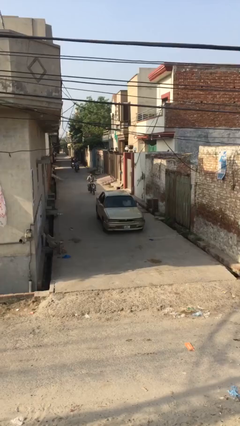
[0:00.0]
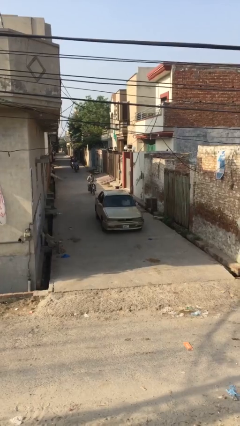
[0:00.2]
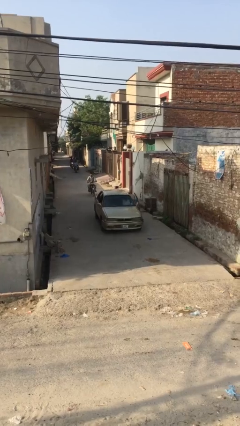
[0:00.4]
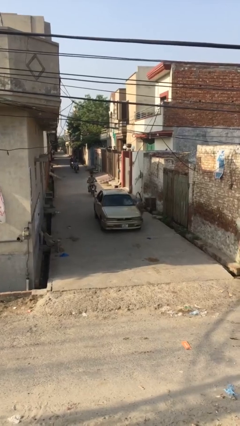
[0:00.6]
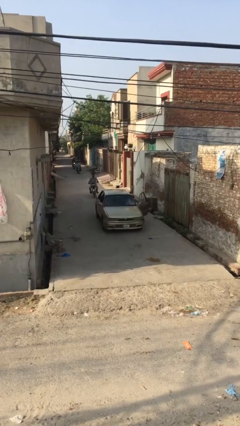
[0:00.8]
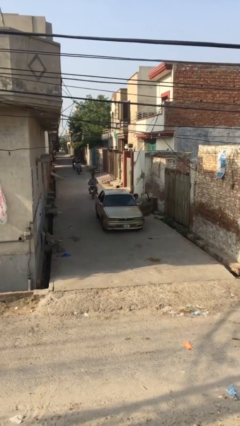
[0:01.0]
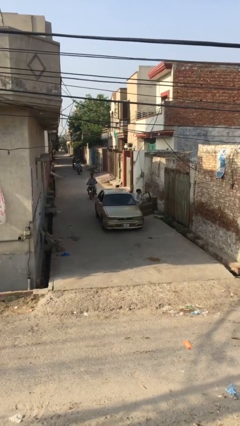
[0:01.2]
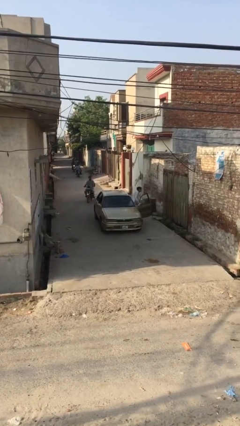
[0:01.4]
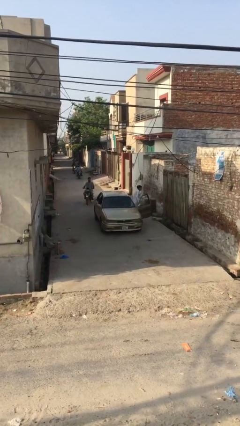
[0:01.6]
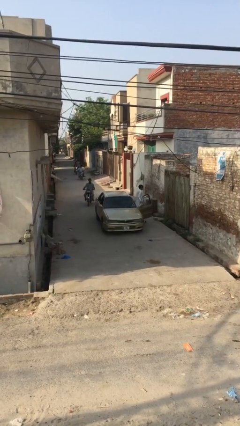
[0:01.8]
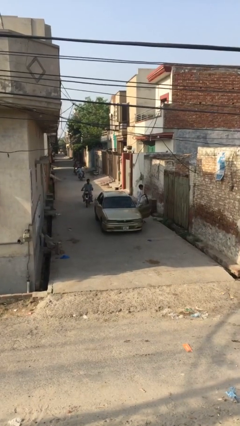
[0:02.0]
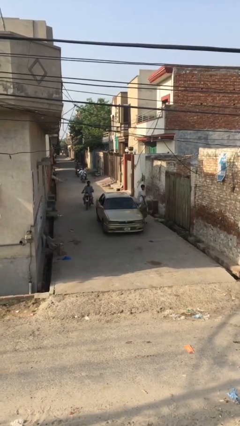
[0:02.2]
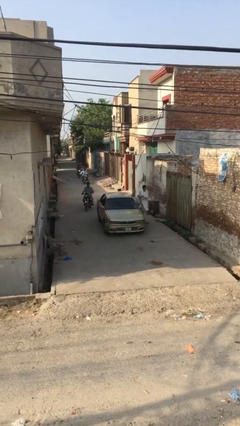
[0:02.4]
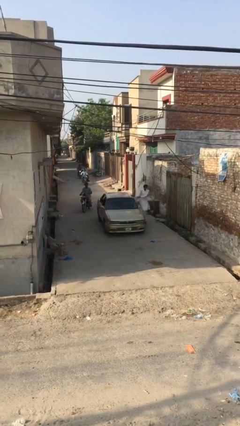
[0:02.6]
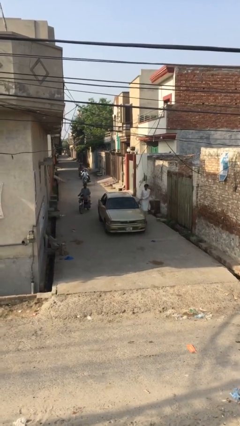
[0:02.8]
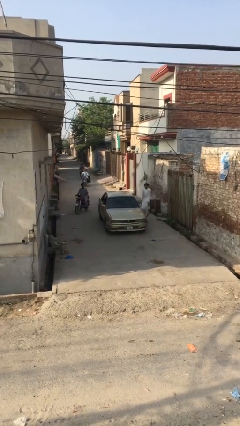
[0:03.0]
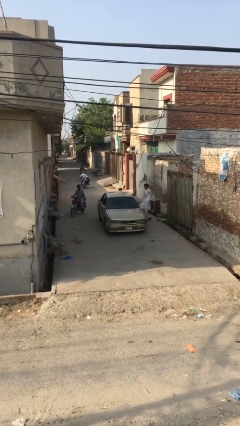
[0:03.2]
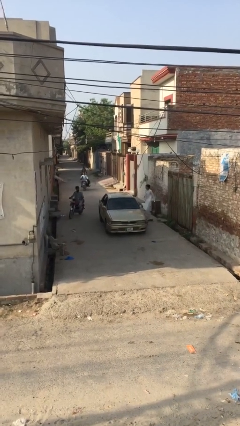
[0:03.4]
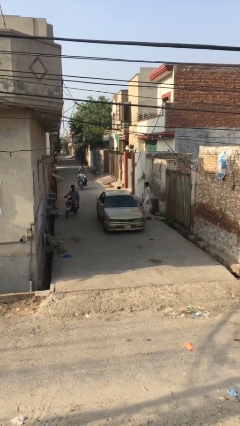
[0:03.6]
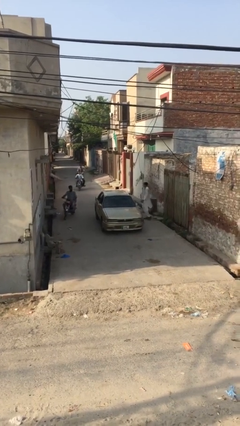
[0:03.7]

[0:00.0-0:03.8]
car drops off person

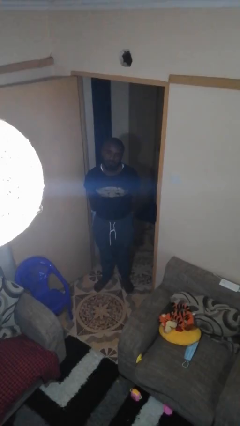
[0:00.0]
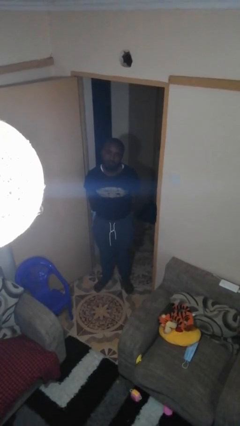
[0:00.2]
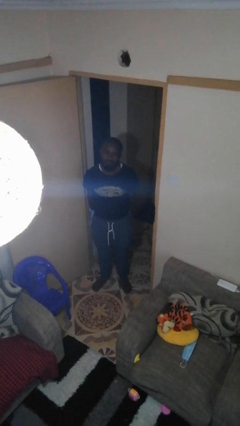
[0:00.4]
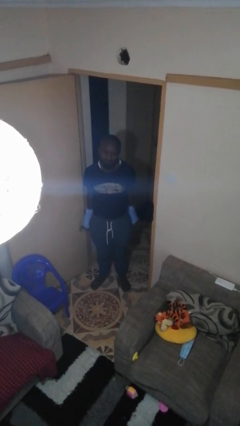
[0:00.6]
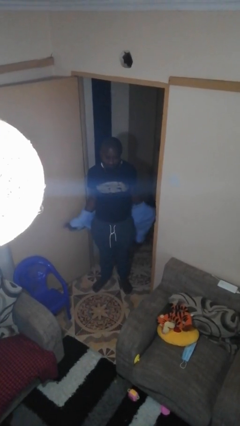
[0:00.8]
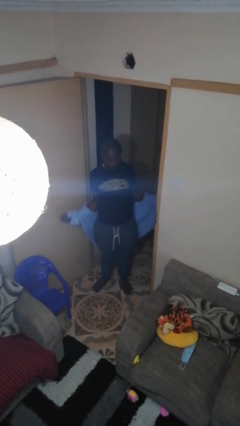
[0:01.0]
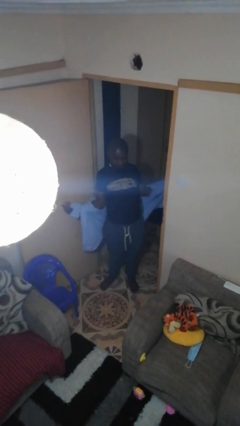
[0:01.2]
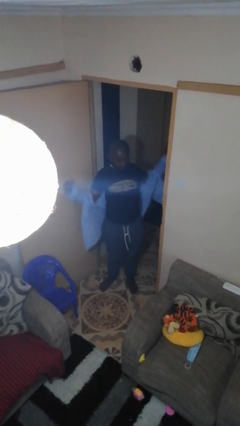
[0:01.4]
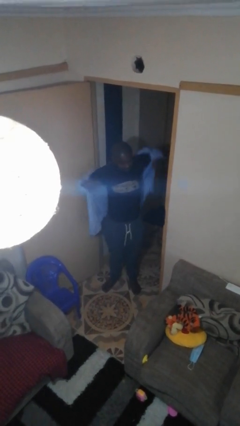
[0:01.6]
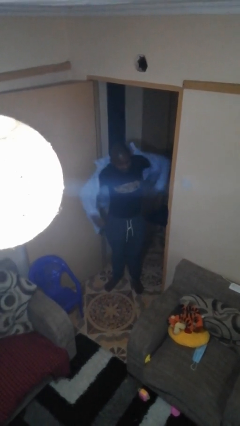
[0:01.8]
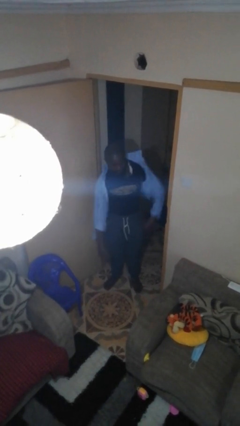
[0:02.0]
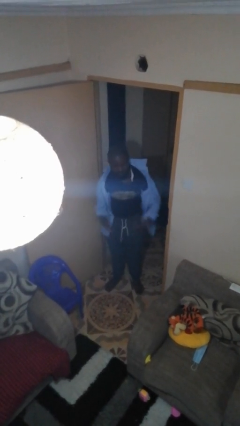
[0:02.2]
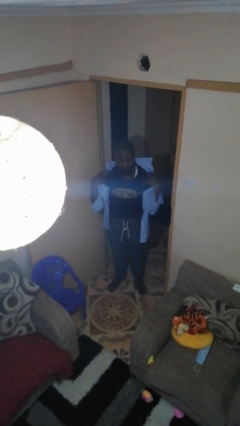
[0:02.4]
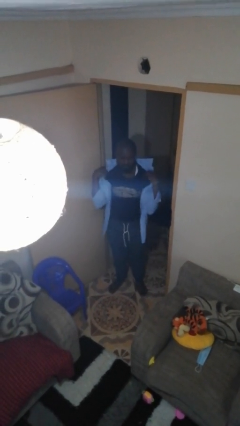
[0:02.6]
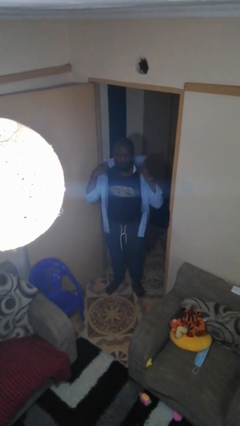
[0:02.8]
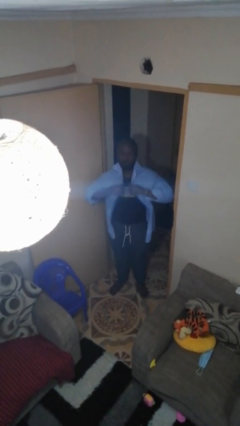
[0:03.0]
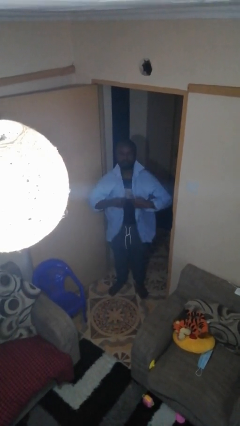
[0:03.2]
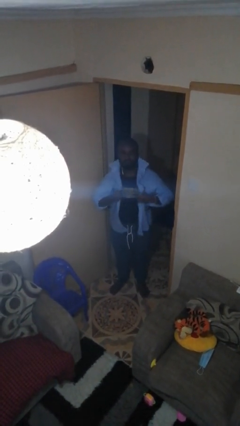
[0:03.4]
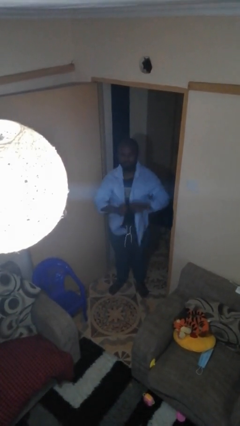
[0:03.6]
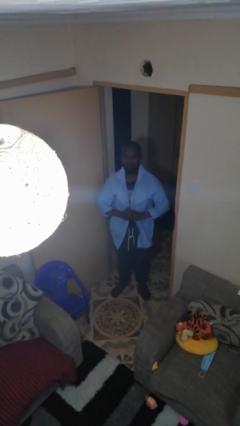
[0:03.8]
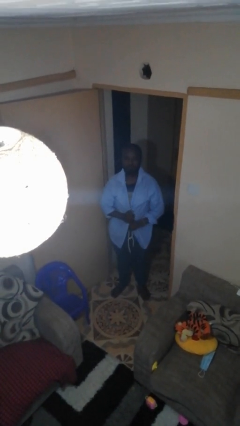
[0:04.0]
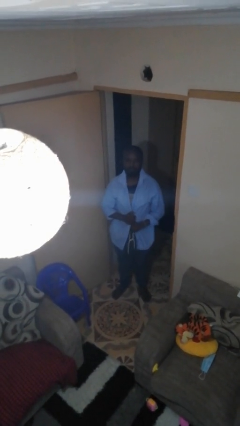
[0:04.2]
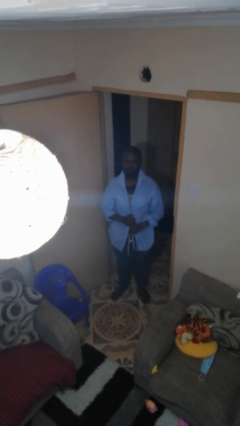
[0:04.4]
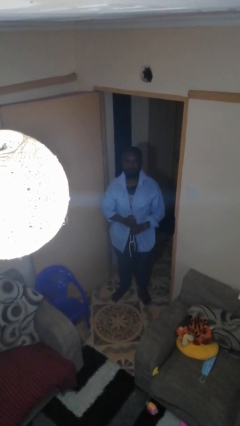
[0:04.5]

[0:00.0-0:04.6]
person puts on shirt

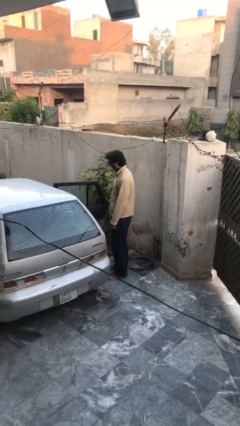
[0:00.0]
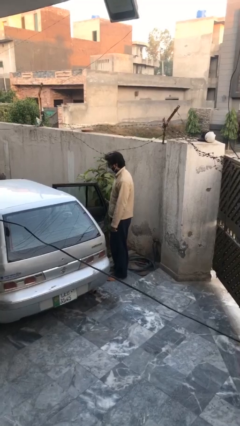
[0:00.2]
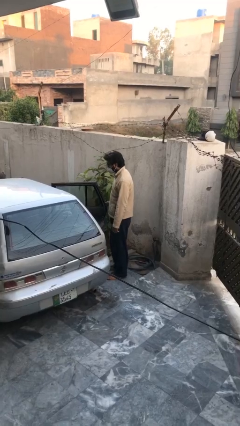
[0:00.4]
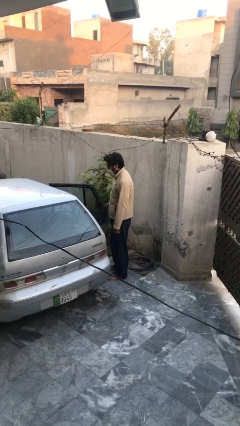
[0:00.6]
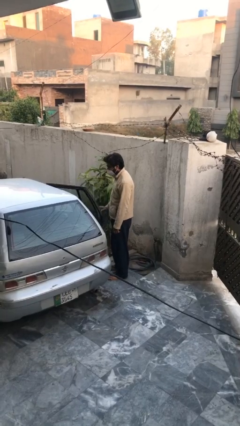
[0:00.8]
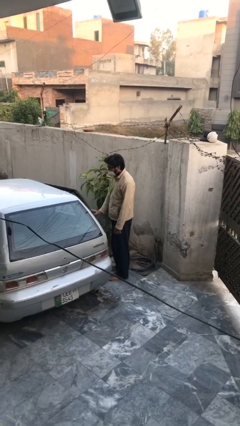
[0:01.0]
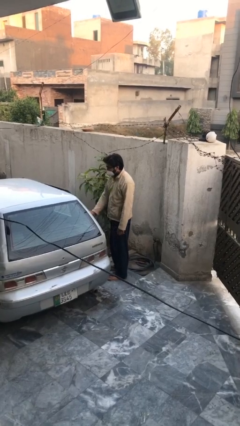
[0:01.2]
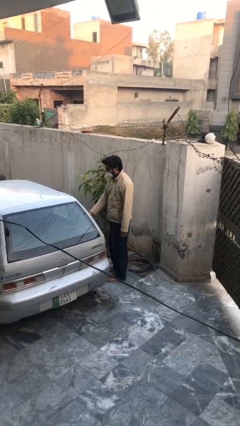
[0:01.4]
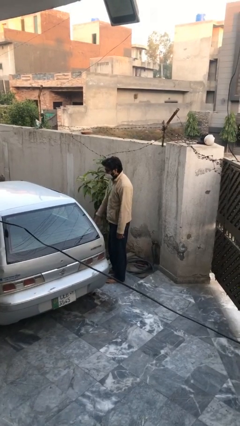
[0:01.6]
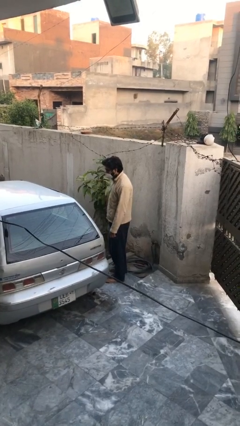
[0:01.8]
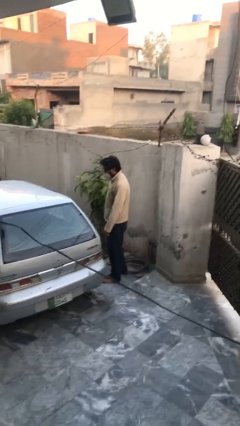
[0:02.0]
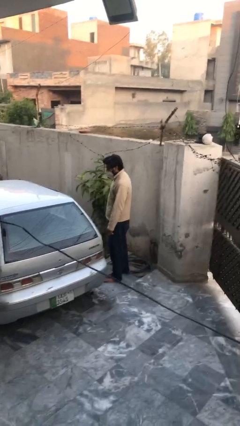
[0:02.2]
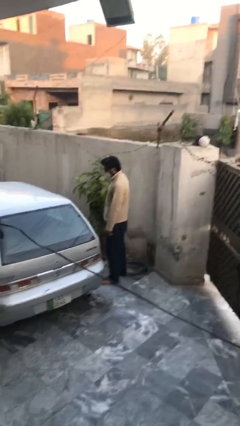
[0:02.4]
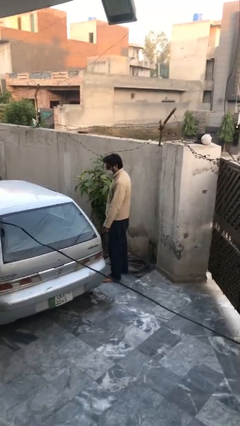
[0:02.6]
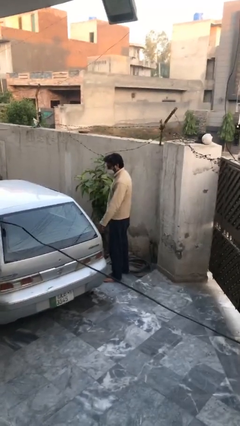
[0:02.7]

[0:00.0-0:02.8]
person closes car door

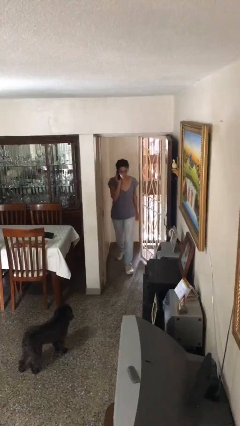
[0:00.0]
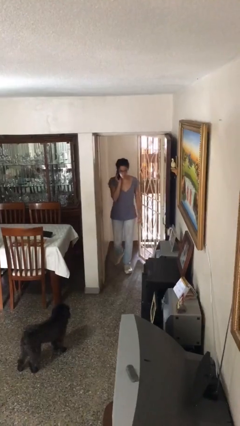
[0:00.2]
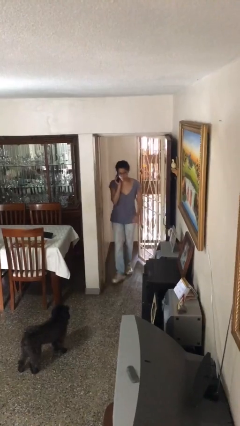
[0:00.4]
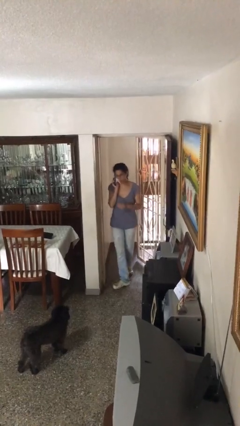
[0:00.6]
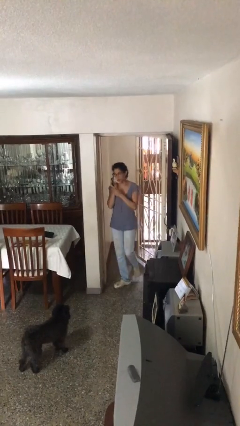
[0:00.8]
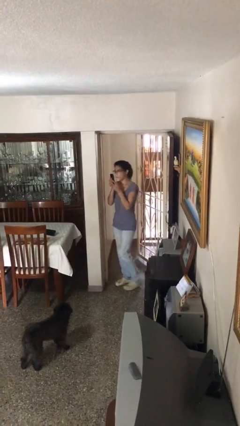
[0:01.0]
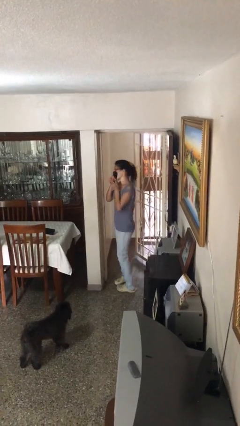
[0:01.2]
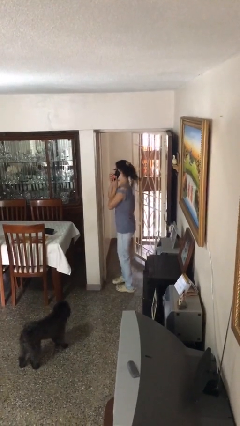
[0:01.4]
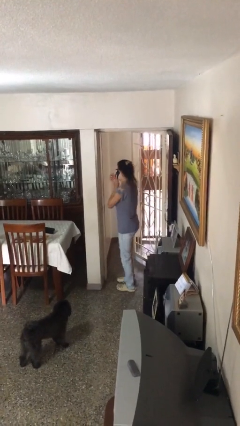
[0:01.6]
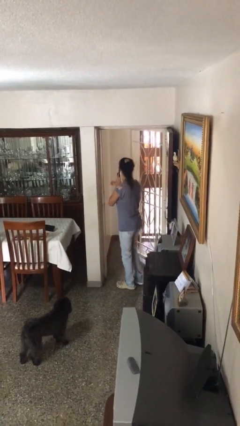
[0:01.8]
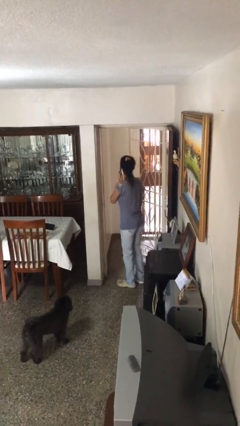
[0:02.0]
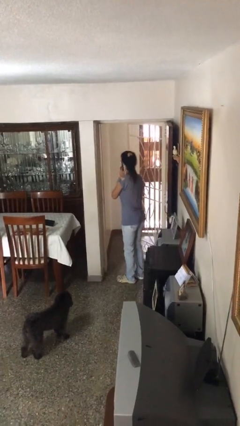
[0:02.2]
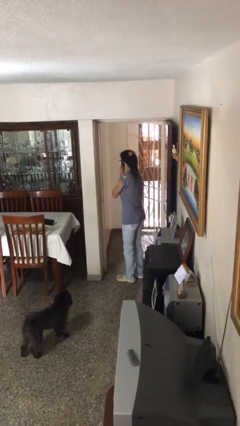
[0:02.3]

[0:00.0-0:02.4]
person enters scene through structure

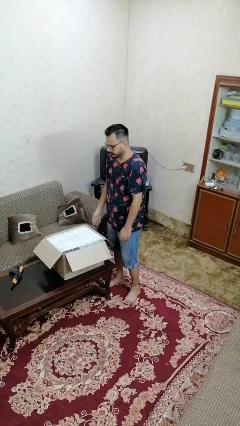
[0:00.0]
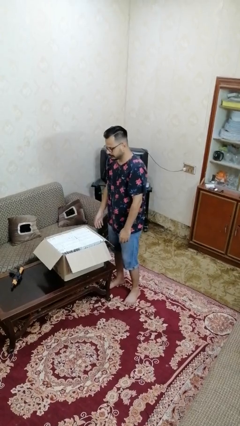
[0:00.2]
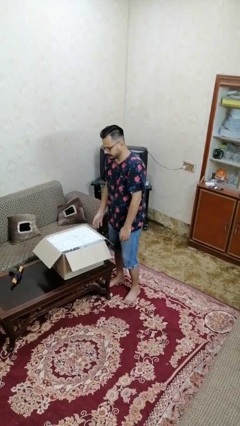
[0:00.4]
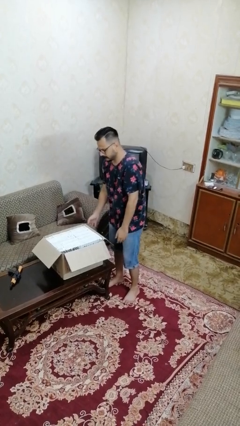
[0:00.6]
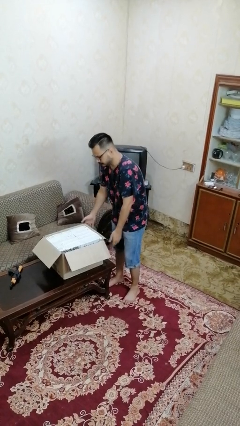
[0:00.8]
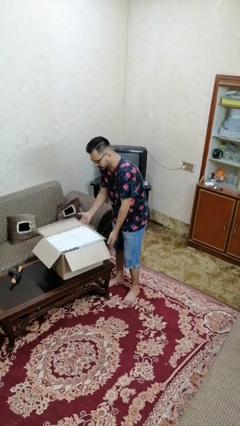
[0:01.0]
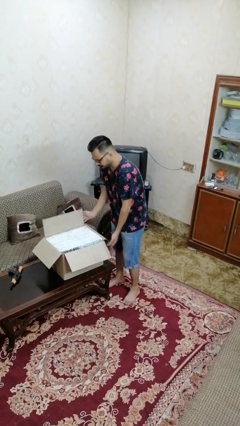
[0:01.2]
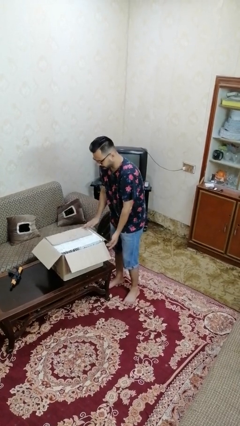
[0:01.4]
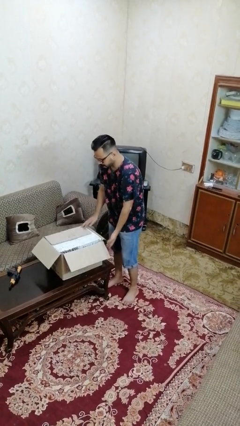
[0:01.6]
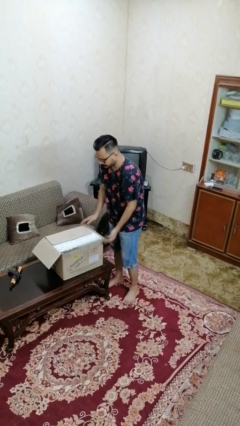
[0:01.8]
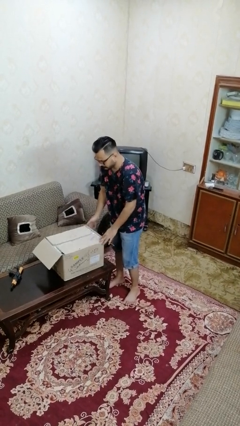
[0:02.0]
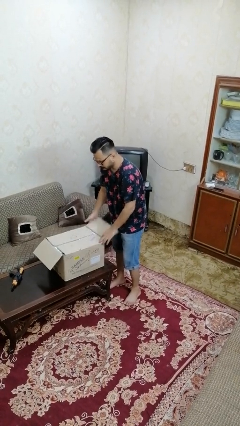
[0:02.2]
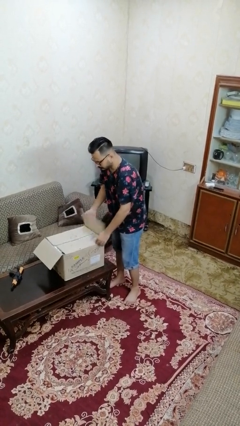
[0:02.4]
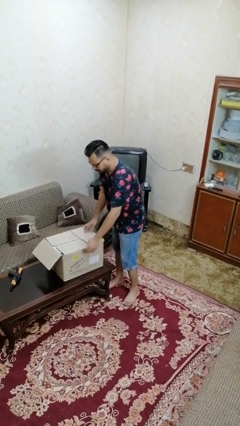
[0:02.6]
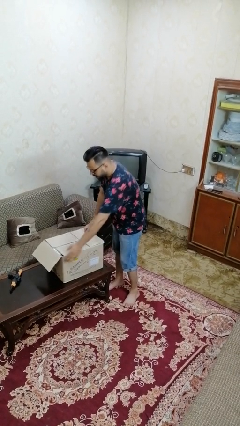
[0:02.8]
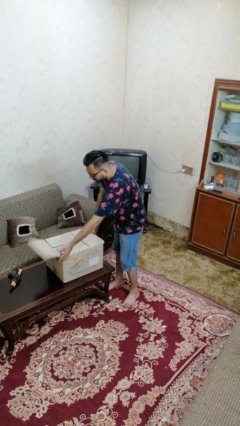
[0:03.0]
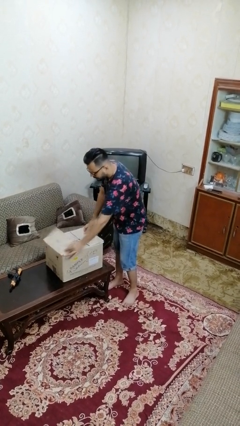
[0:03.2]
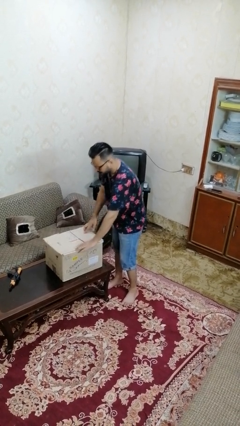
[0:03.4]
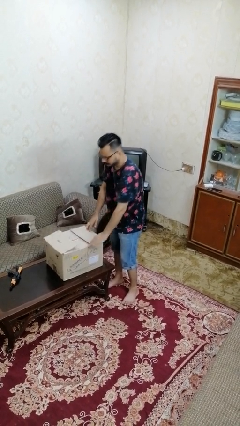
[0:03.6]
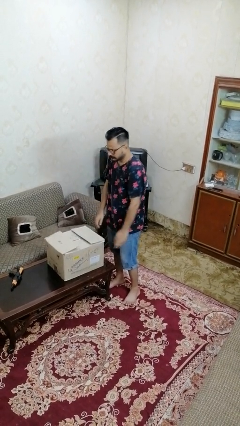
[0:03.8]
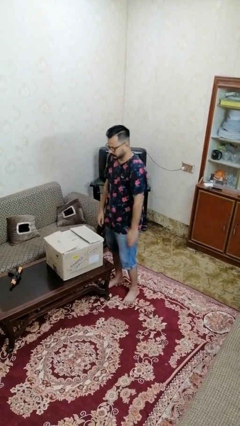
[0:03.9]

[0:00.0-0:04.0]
person closes box

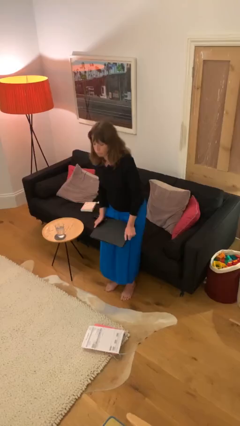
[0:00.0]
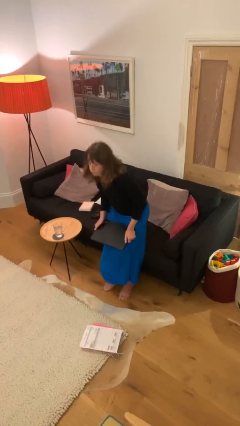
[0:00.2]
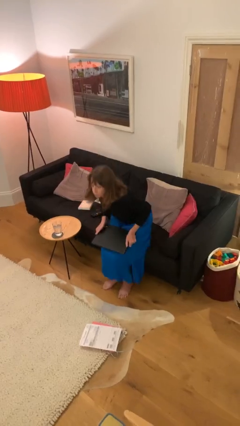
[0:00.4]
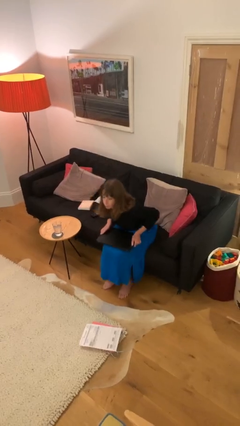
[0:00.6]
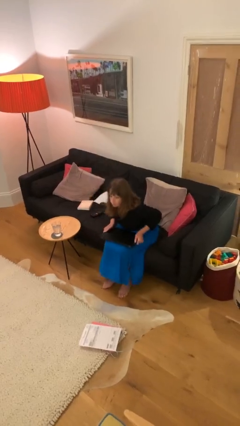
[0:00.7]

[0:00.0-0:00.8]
person sits down
